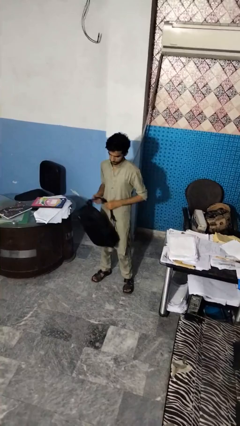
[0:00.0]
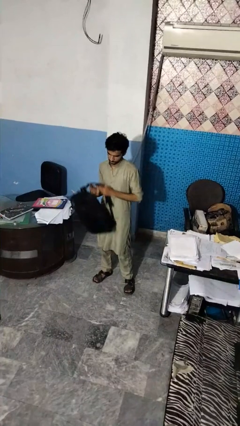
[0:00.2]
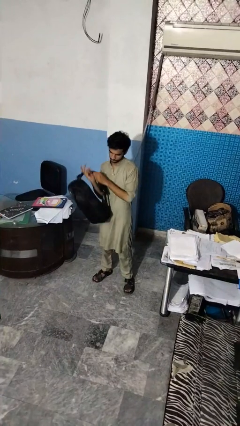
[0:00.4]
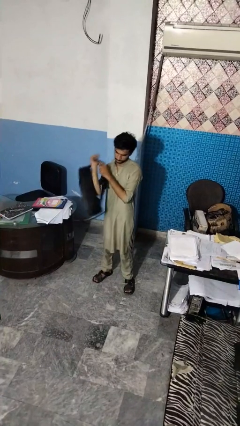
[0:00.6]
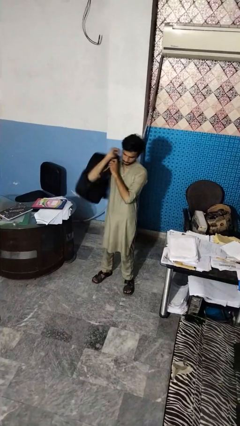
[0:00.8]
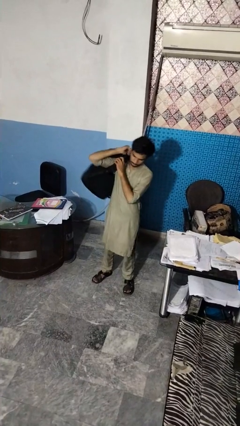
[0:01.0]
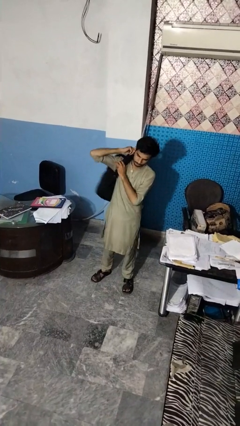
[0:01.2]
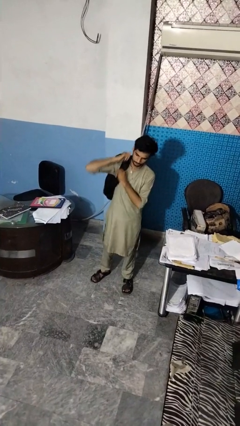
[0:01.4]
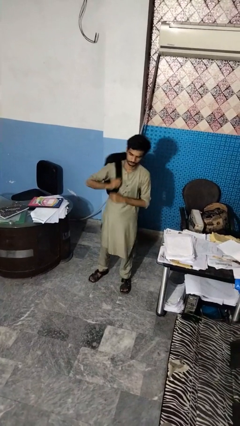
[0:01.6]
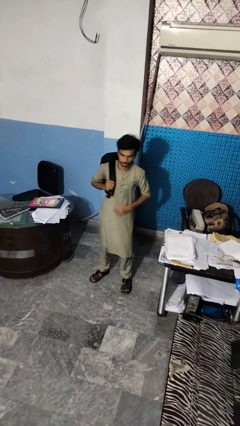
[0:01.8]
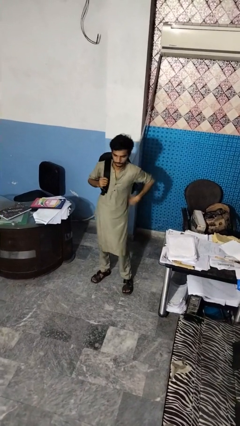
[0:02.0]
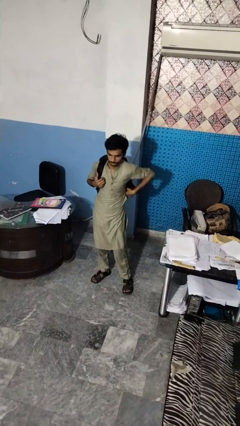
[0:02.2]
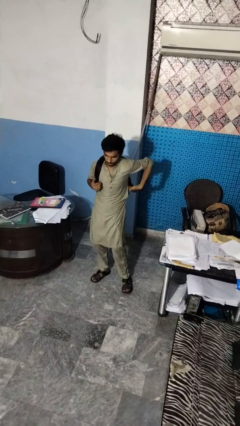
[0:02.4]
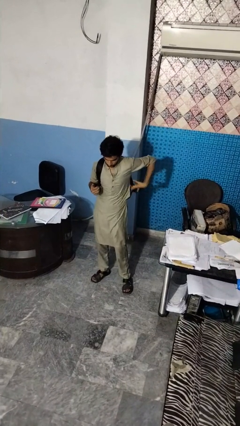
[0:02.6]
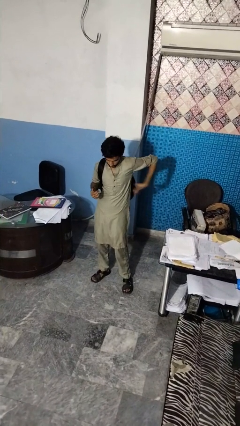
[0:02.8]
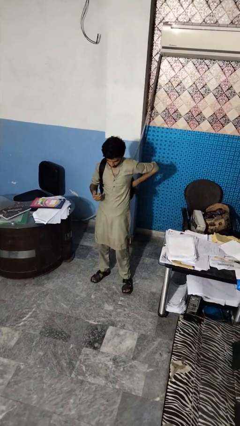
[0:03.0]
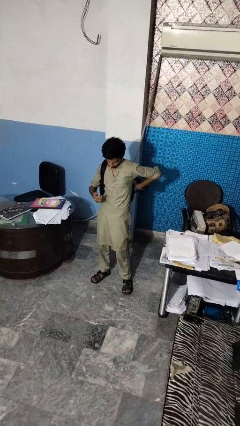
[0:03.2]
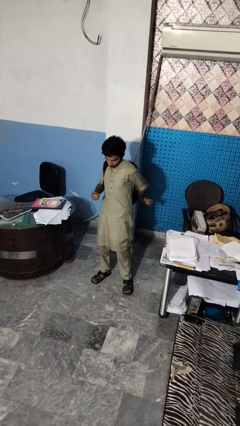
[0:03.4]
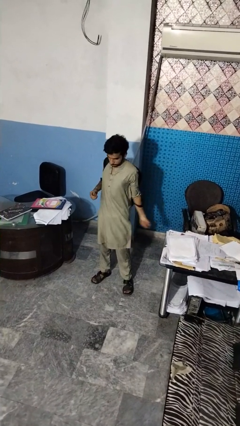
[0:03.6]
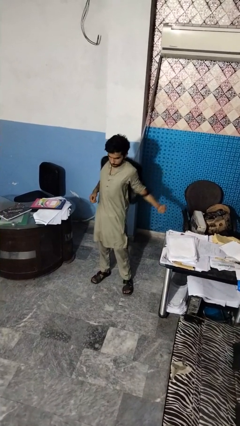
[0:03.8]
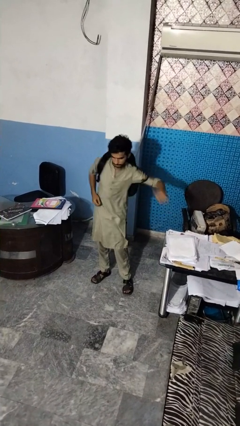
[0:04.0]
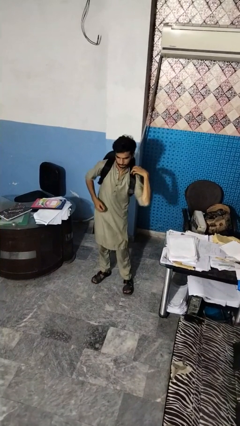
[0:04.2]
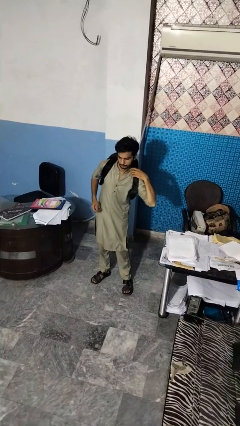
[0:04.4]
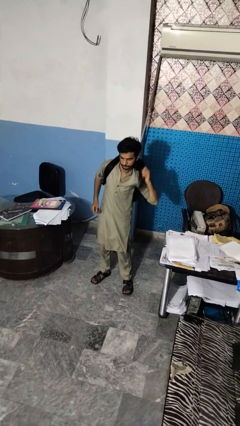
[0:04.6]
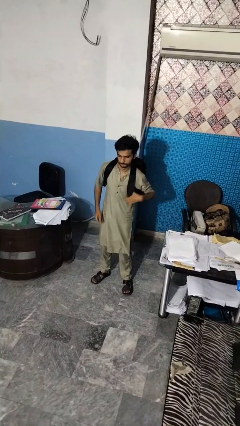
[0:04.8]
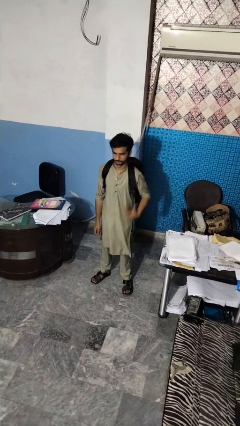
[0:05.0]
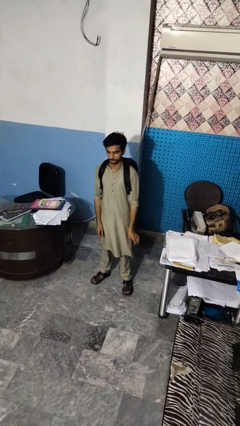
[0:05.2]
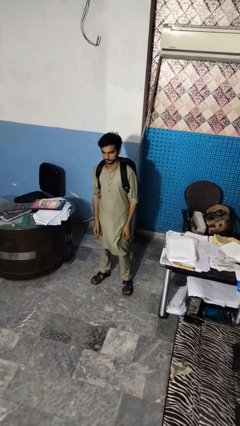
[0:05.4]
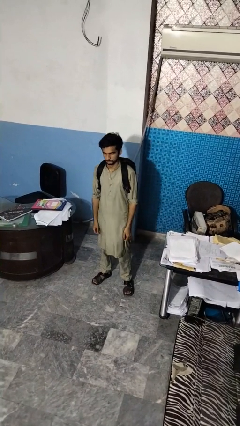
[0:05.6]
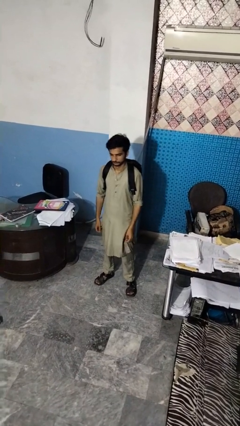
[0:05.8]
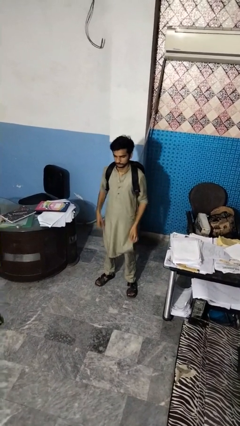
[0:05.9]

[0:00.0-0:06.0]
person puts on backpack

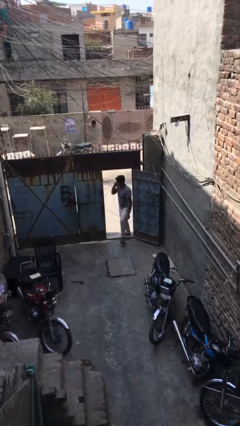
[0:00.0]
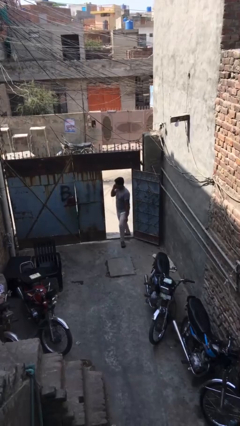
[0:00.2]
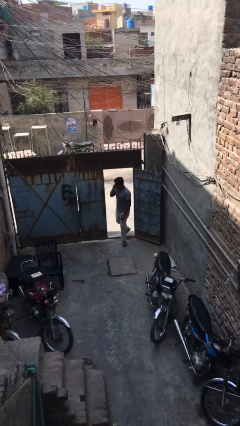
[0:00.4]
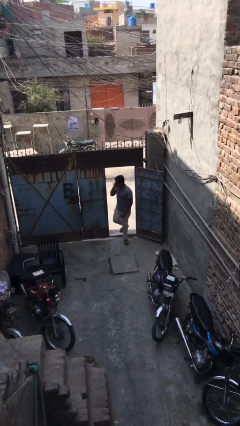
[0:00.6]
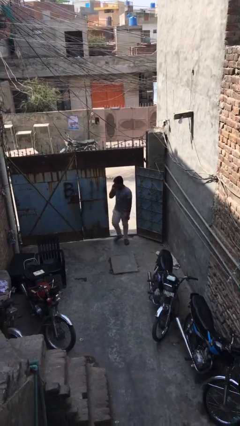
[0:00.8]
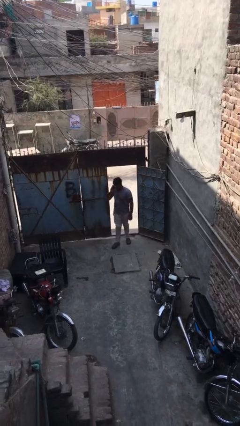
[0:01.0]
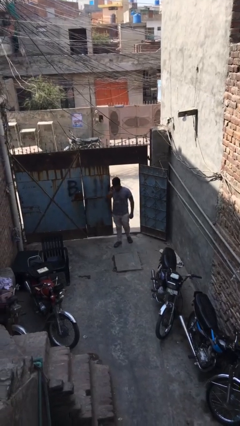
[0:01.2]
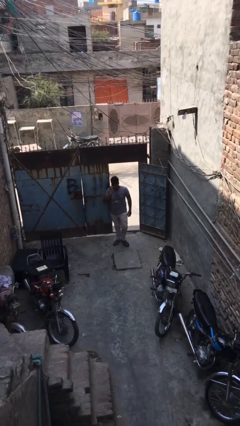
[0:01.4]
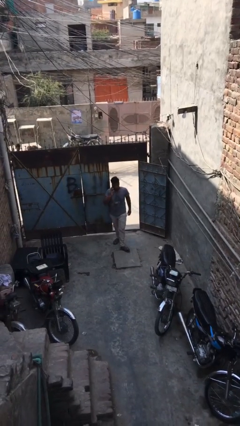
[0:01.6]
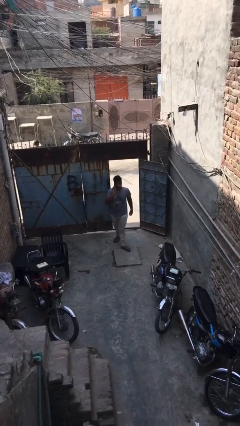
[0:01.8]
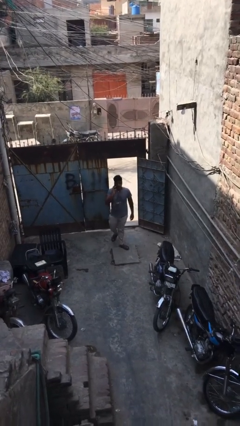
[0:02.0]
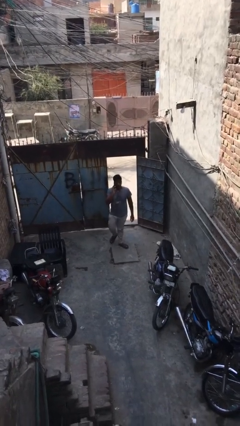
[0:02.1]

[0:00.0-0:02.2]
person enters scene through structure

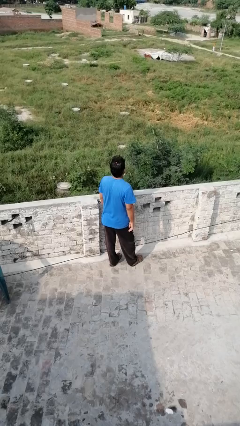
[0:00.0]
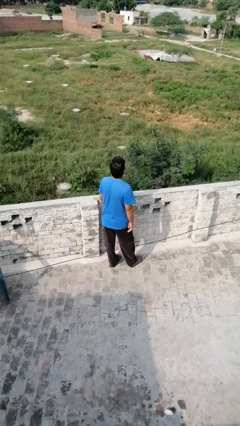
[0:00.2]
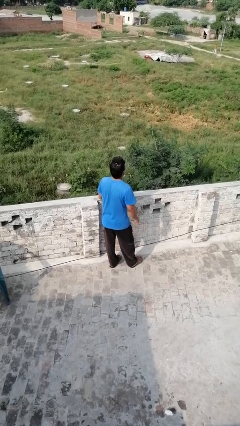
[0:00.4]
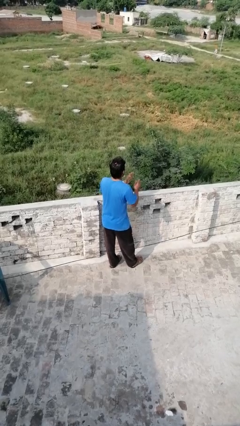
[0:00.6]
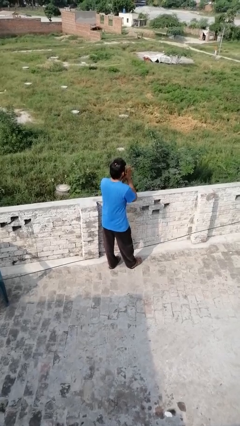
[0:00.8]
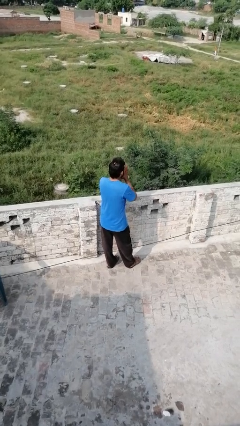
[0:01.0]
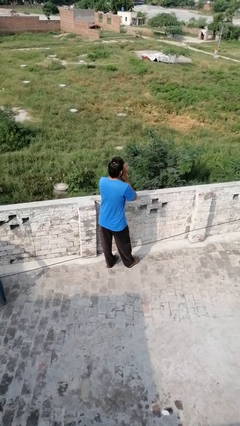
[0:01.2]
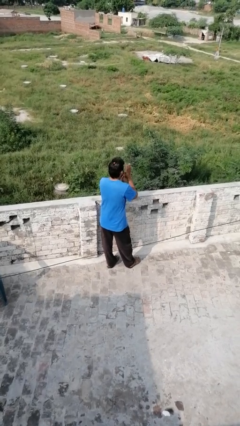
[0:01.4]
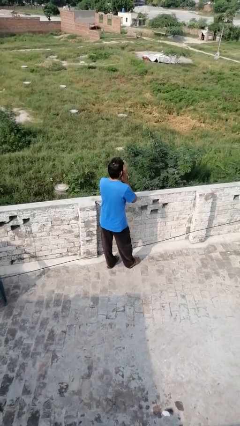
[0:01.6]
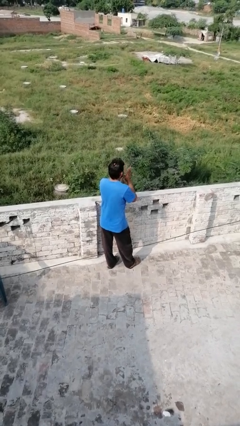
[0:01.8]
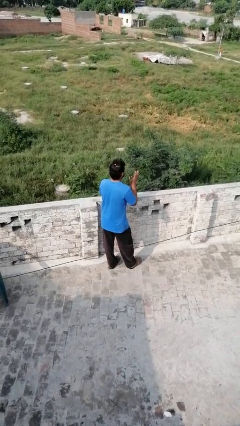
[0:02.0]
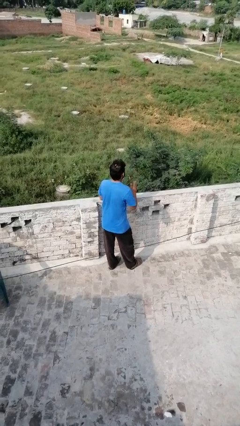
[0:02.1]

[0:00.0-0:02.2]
person blows into hands

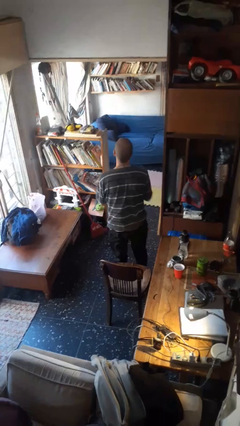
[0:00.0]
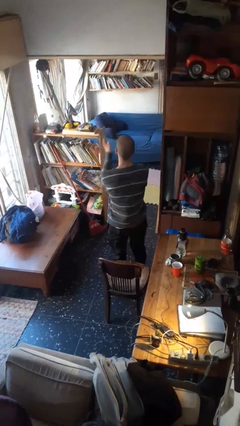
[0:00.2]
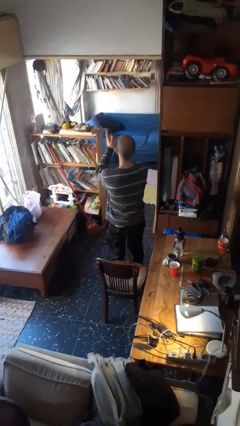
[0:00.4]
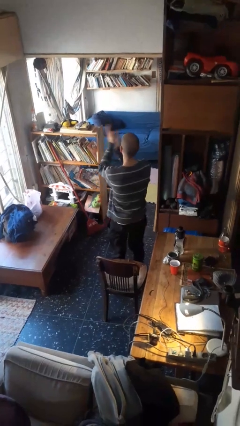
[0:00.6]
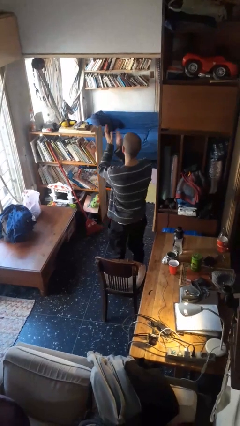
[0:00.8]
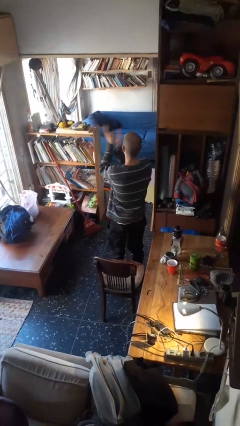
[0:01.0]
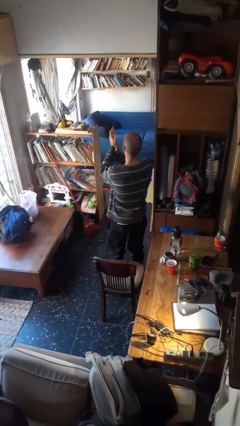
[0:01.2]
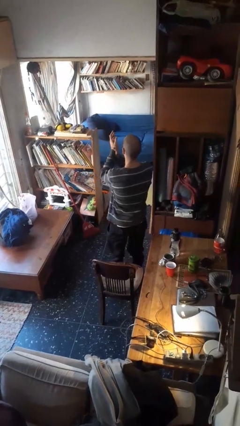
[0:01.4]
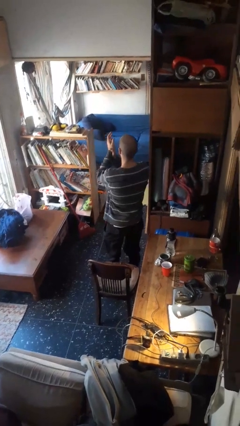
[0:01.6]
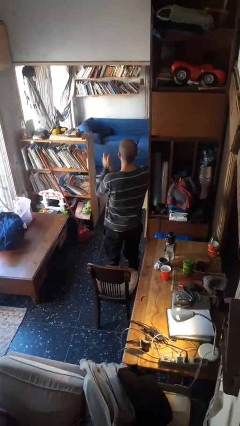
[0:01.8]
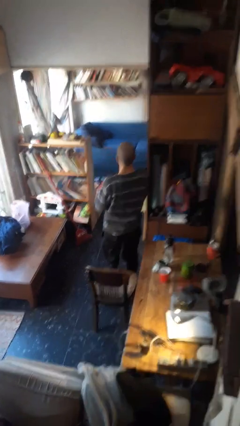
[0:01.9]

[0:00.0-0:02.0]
person claps hands

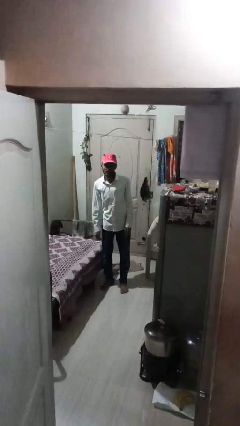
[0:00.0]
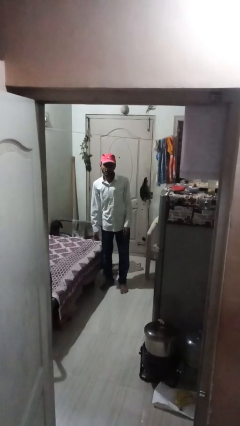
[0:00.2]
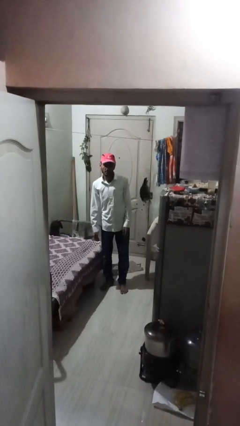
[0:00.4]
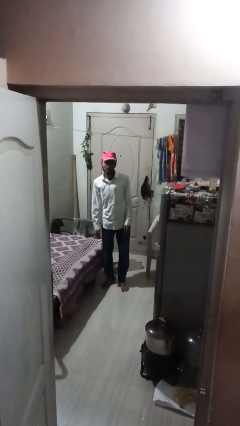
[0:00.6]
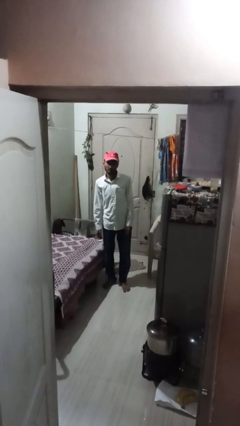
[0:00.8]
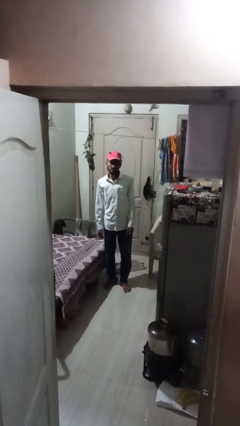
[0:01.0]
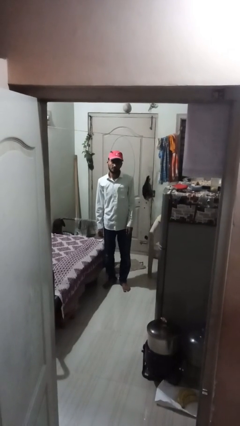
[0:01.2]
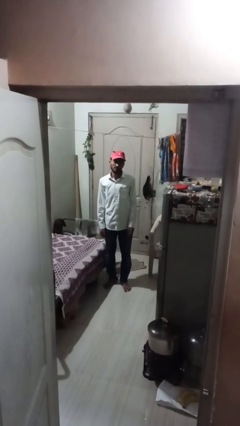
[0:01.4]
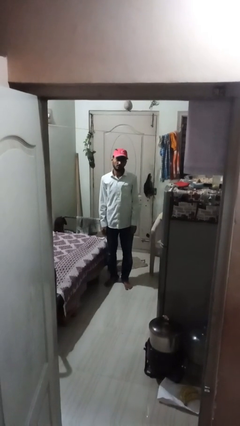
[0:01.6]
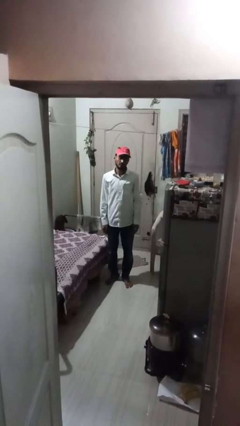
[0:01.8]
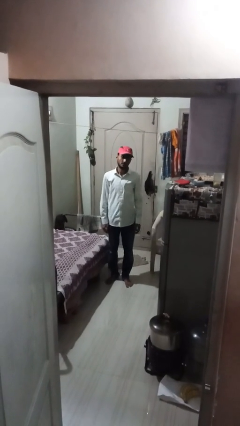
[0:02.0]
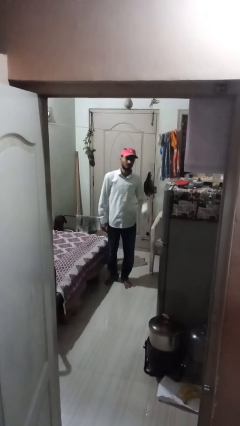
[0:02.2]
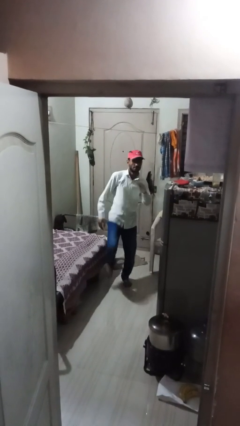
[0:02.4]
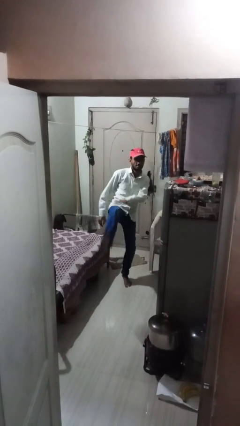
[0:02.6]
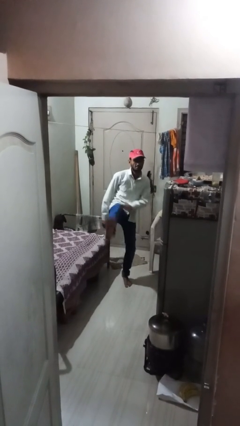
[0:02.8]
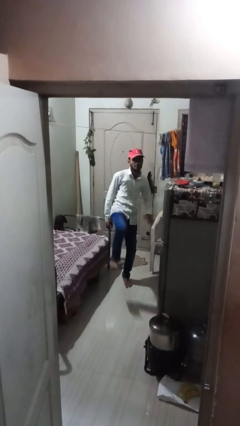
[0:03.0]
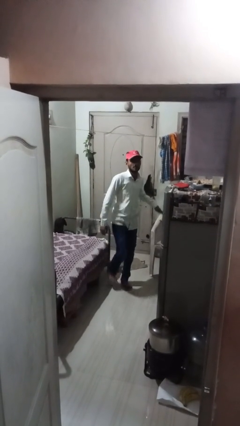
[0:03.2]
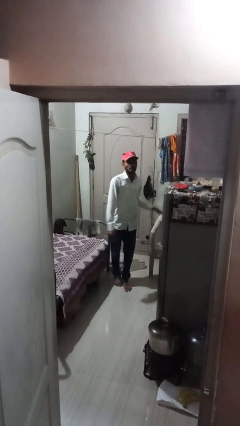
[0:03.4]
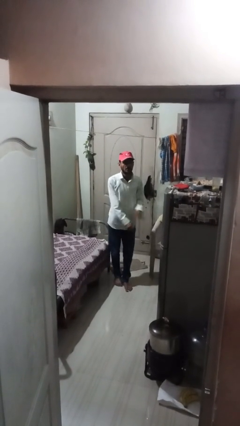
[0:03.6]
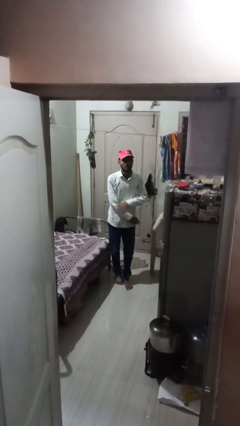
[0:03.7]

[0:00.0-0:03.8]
person karate kicks

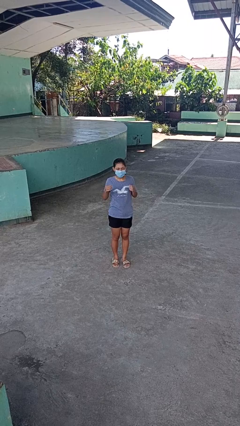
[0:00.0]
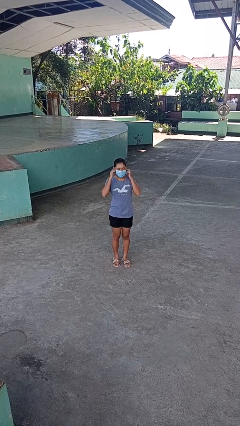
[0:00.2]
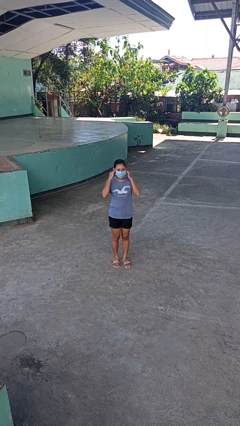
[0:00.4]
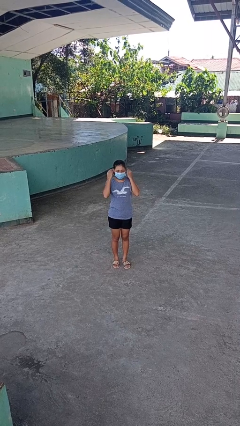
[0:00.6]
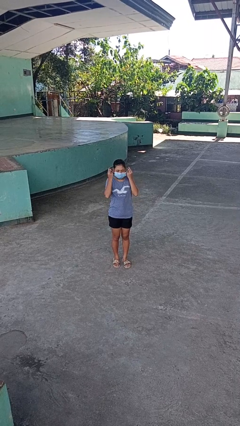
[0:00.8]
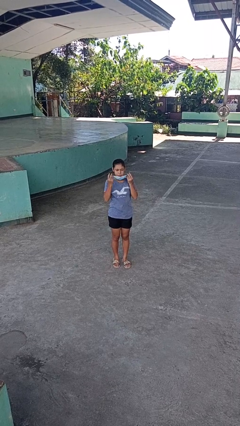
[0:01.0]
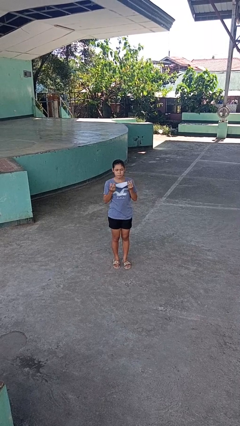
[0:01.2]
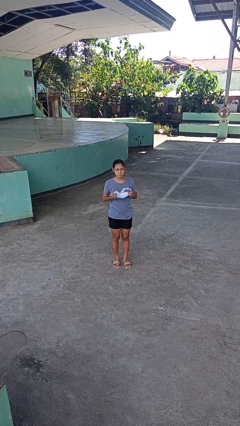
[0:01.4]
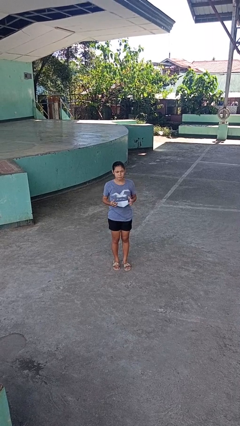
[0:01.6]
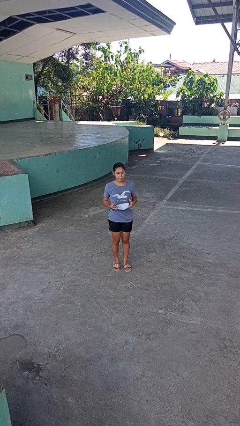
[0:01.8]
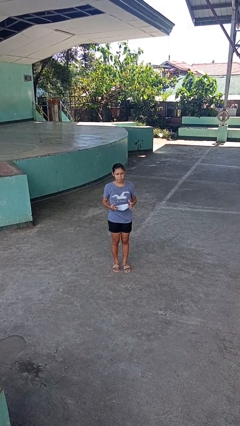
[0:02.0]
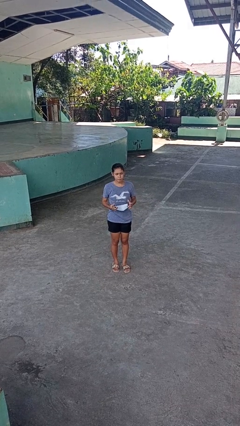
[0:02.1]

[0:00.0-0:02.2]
person takes off facemask
